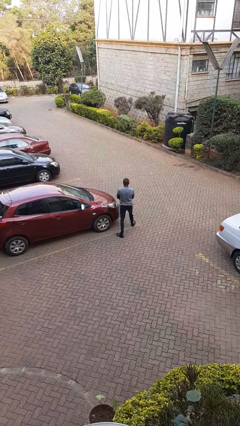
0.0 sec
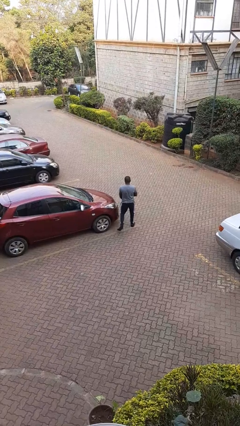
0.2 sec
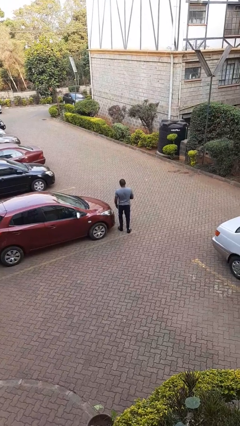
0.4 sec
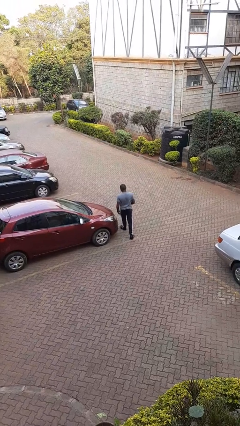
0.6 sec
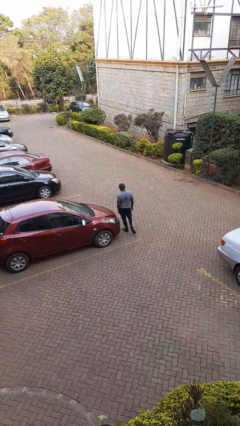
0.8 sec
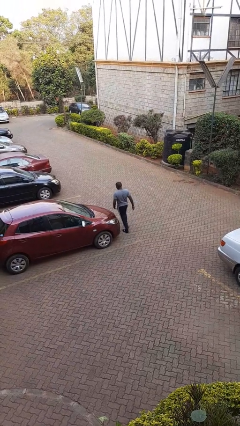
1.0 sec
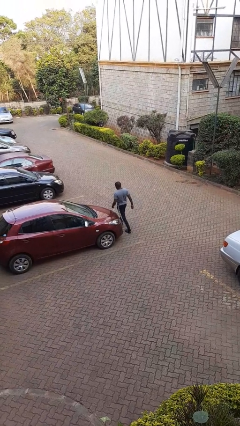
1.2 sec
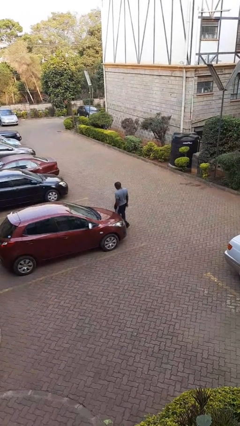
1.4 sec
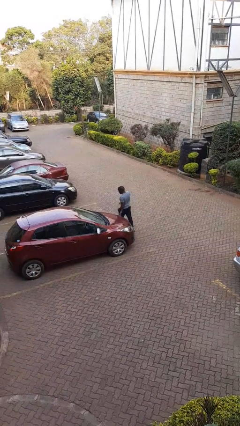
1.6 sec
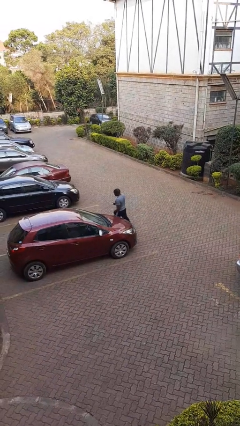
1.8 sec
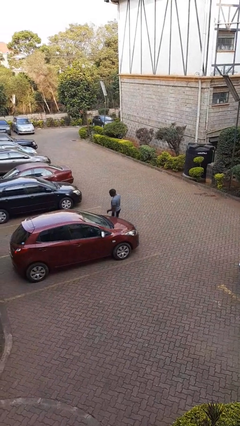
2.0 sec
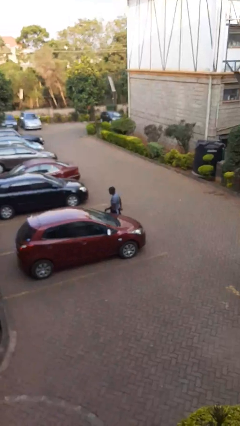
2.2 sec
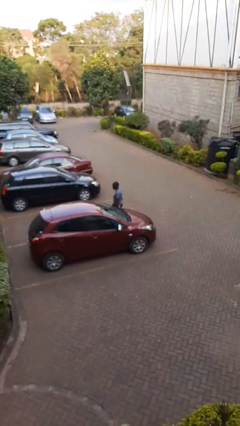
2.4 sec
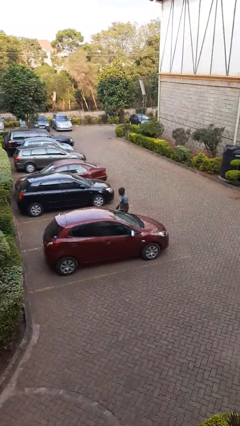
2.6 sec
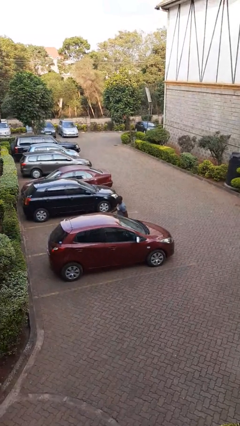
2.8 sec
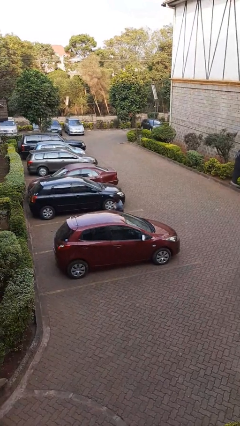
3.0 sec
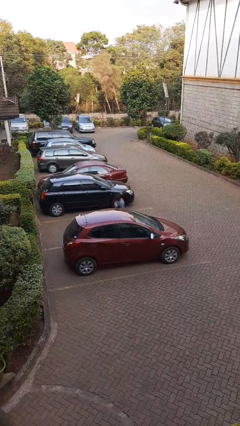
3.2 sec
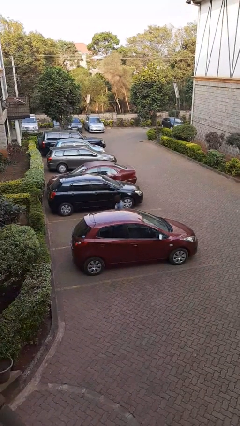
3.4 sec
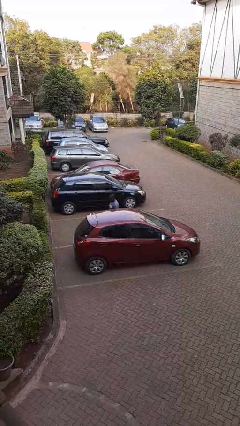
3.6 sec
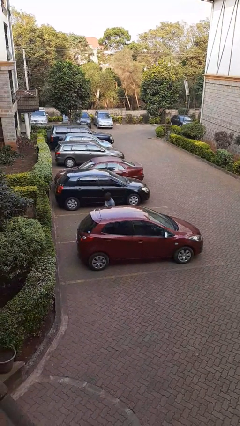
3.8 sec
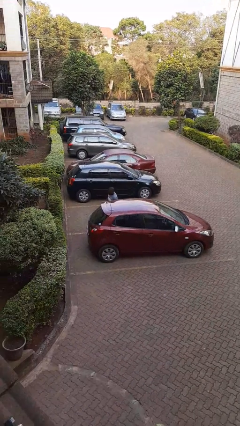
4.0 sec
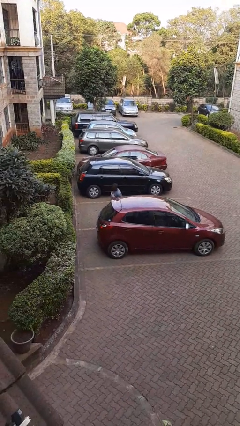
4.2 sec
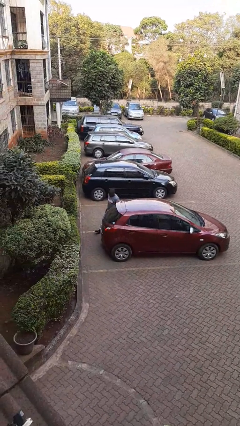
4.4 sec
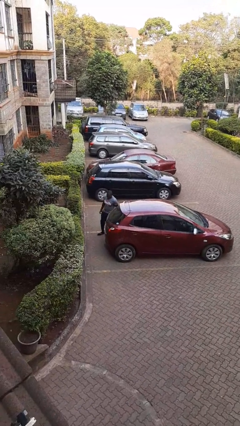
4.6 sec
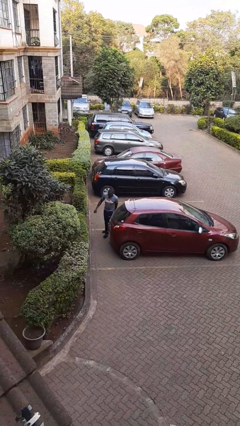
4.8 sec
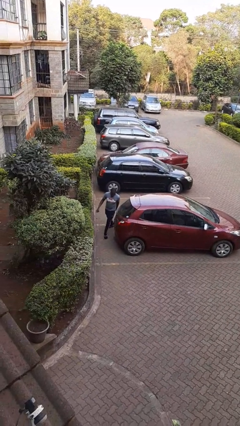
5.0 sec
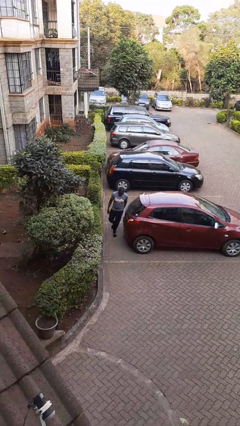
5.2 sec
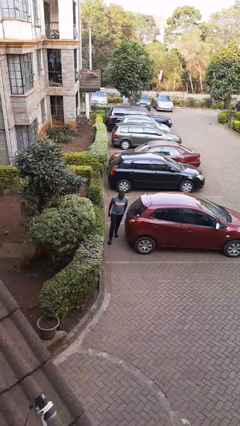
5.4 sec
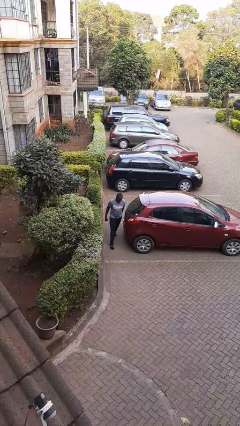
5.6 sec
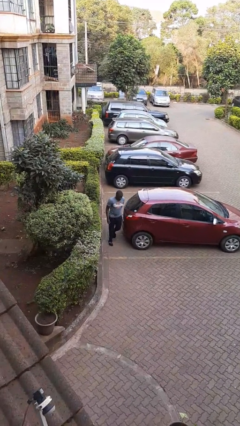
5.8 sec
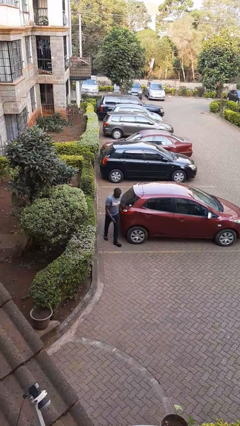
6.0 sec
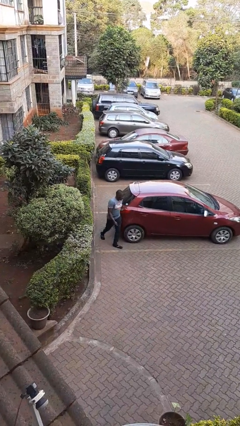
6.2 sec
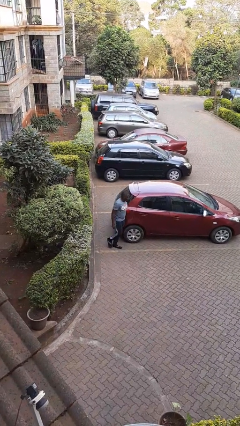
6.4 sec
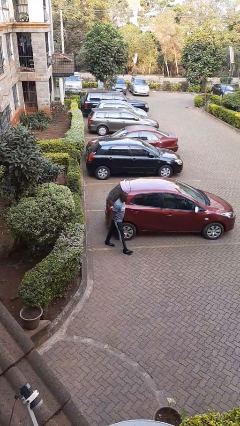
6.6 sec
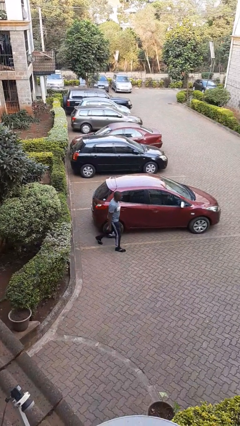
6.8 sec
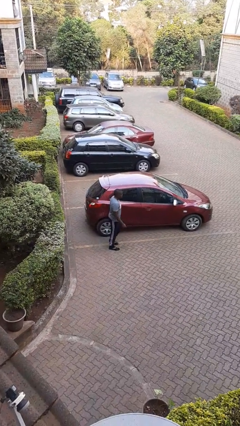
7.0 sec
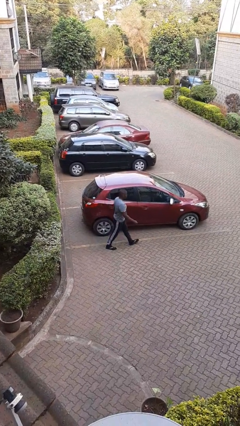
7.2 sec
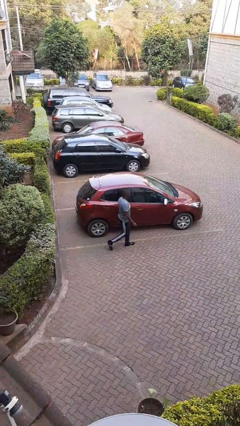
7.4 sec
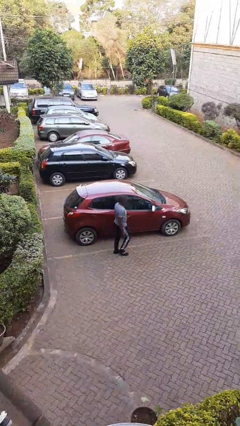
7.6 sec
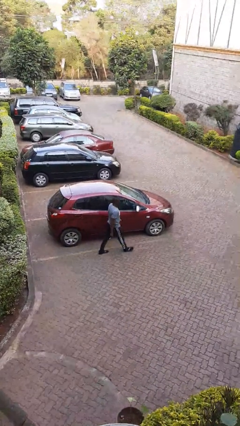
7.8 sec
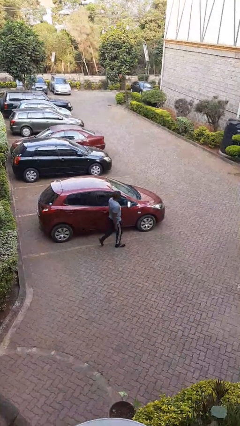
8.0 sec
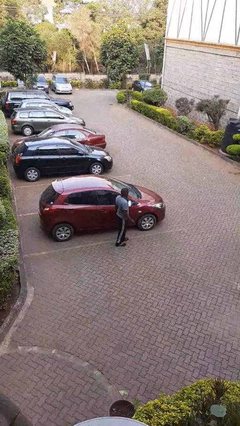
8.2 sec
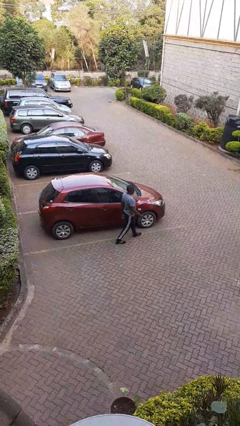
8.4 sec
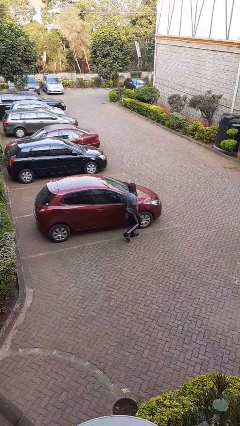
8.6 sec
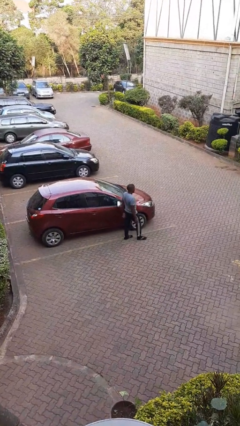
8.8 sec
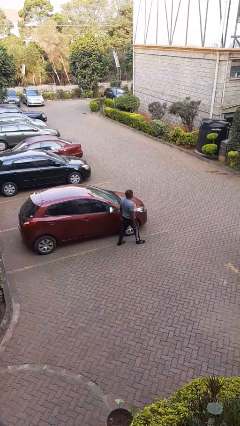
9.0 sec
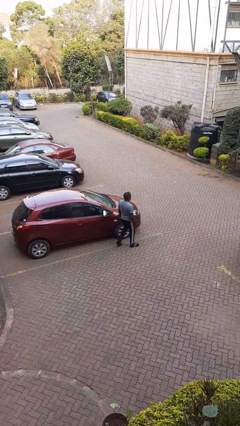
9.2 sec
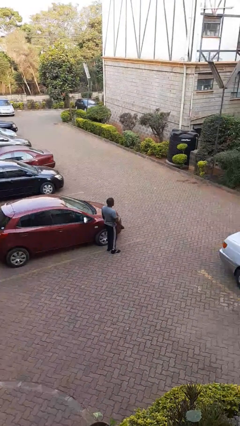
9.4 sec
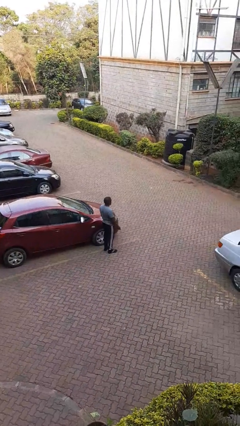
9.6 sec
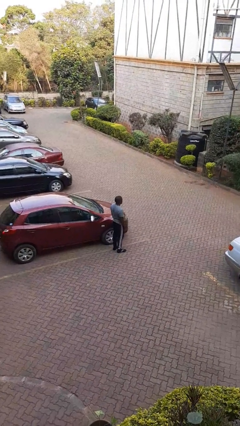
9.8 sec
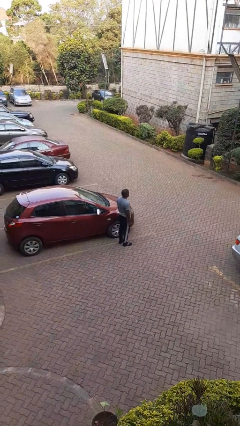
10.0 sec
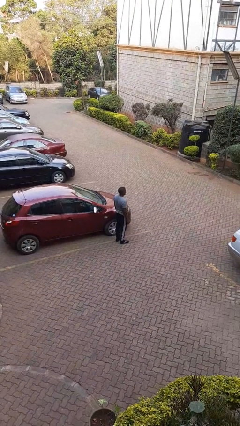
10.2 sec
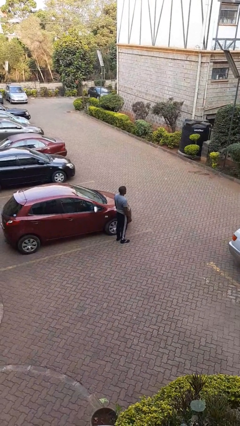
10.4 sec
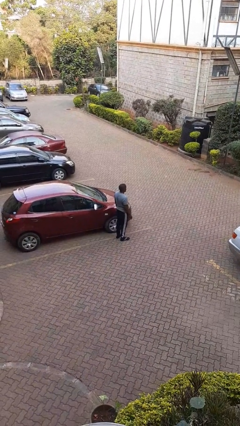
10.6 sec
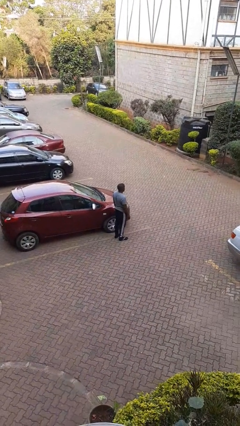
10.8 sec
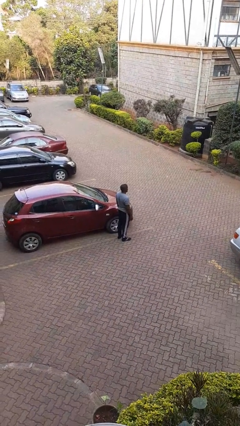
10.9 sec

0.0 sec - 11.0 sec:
person walks around car

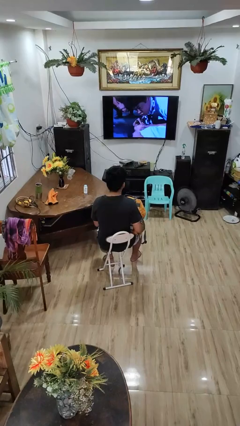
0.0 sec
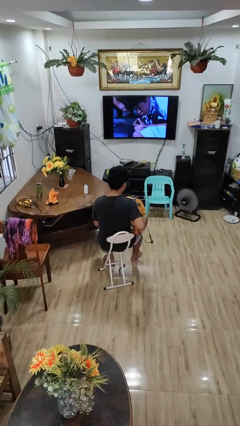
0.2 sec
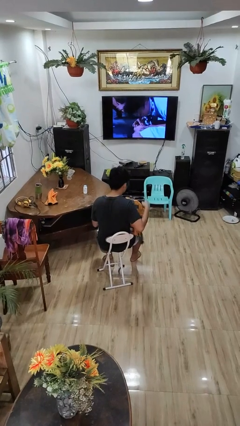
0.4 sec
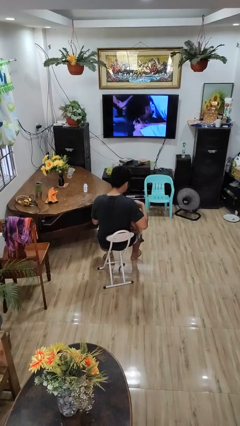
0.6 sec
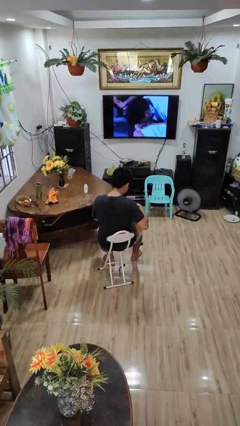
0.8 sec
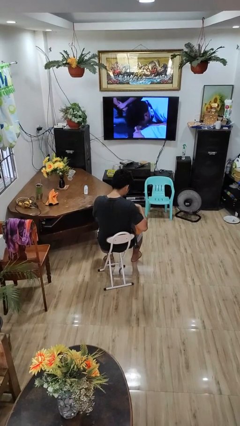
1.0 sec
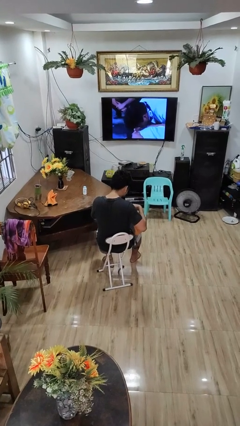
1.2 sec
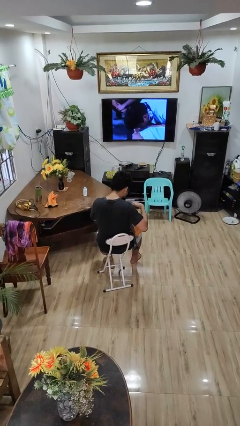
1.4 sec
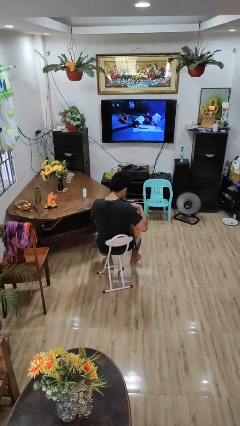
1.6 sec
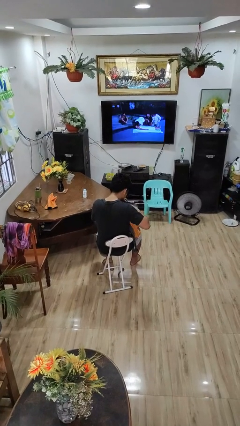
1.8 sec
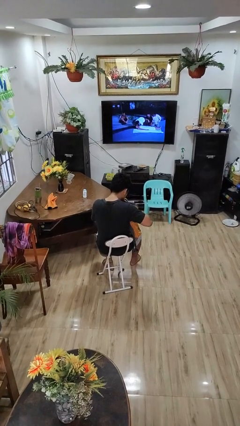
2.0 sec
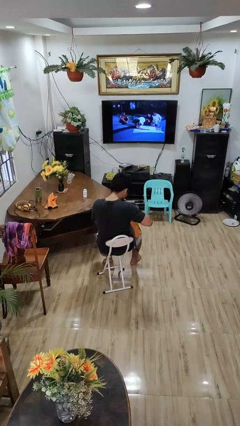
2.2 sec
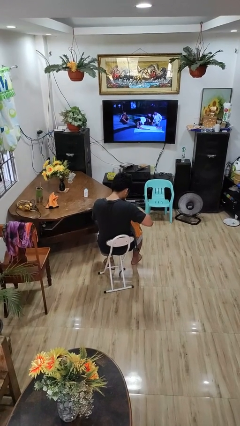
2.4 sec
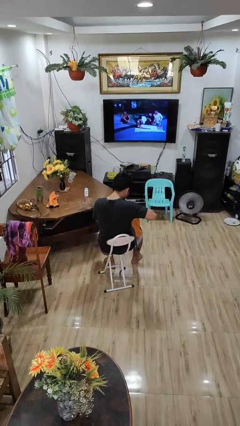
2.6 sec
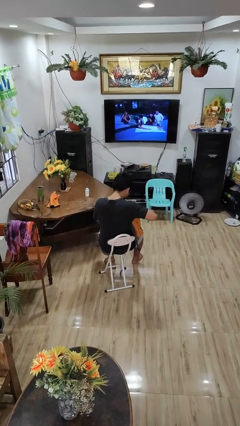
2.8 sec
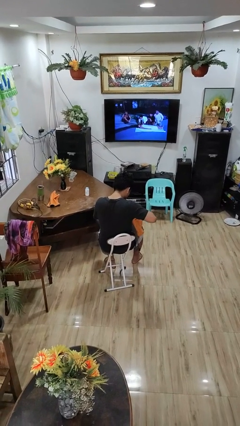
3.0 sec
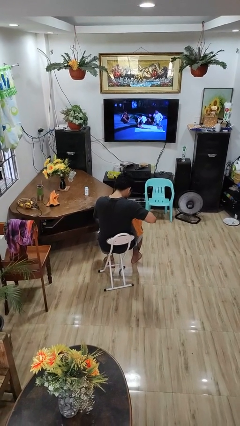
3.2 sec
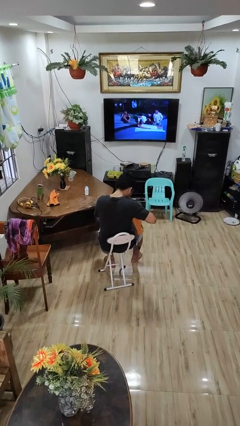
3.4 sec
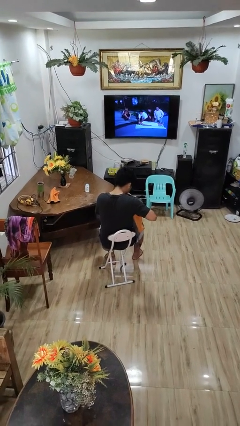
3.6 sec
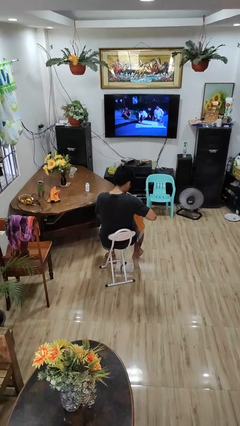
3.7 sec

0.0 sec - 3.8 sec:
person searches in backpack

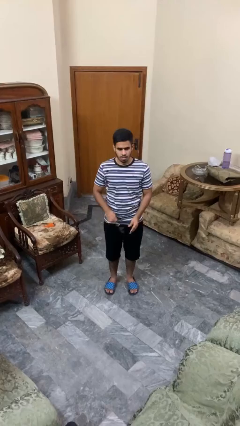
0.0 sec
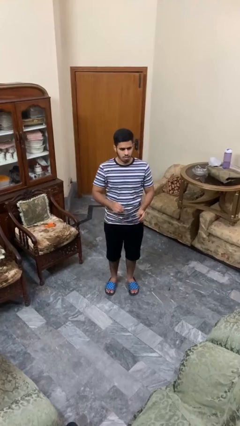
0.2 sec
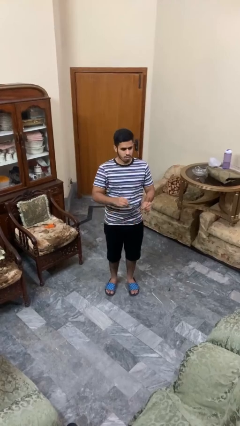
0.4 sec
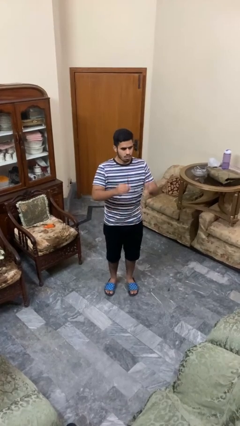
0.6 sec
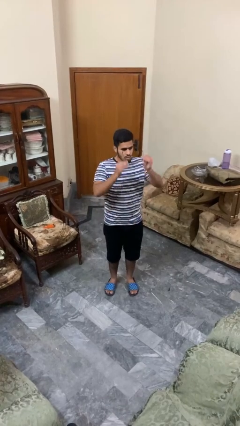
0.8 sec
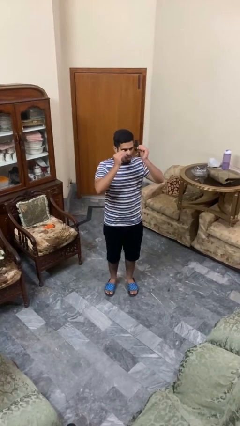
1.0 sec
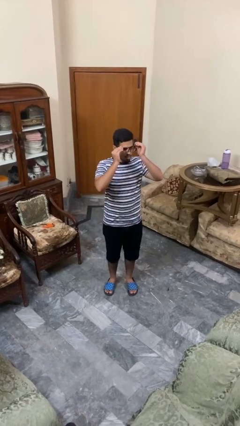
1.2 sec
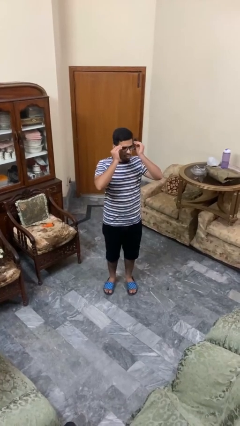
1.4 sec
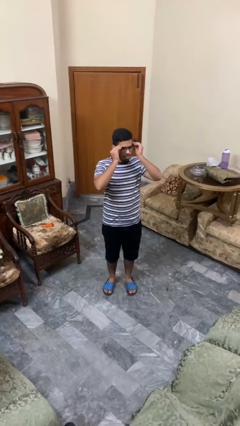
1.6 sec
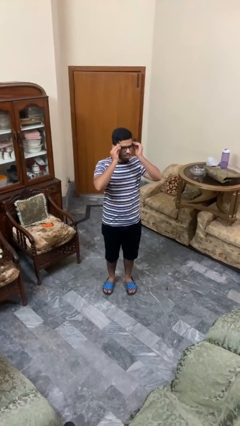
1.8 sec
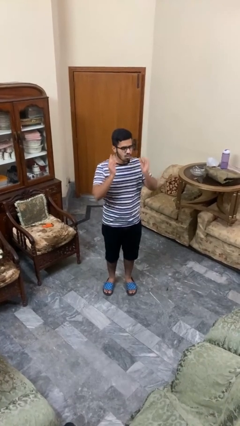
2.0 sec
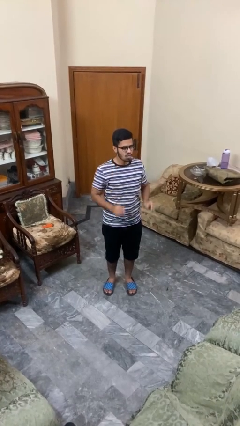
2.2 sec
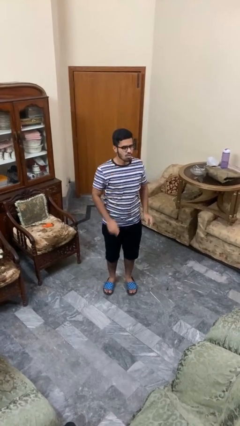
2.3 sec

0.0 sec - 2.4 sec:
person puts on glasses

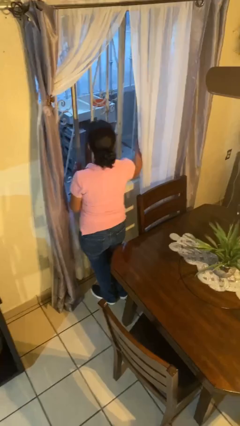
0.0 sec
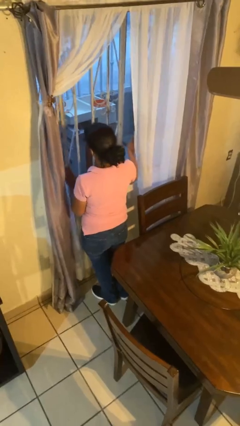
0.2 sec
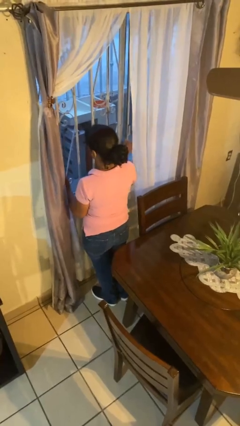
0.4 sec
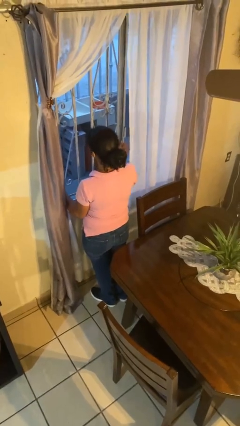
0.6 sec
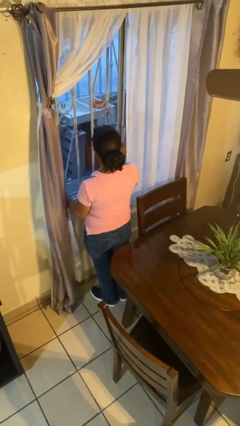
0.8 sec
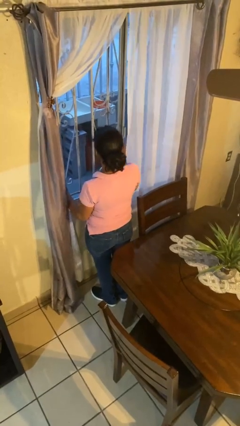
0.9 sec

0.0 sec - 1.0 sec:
person closes home window
